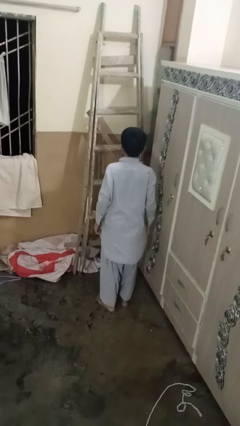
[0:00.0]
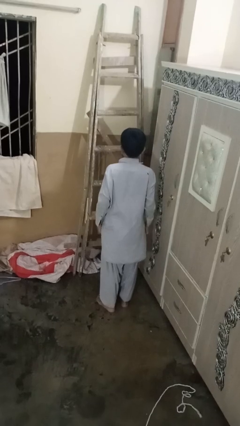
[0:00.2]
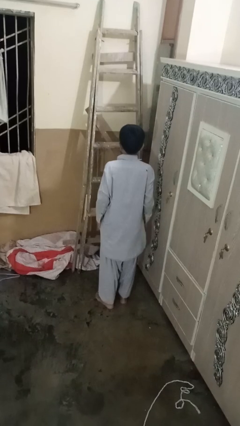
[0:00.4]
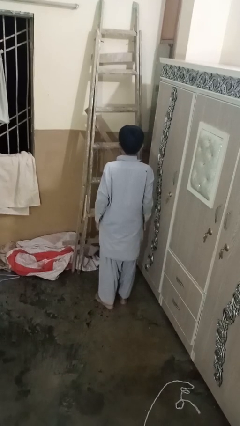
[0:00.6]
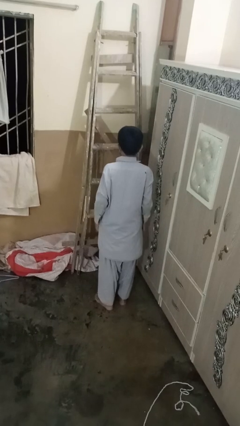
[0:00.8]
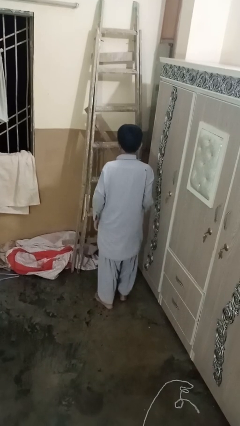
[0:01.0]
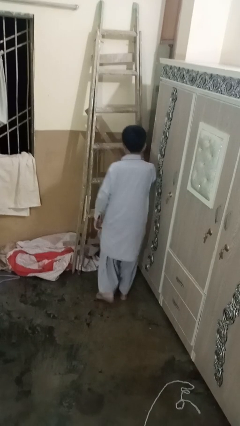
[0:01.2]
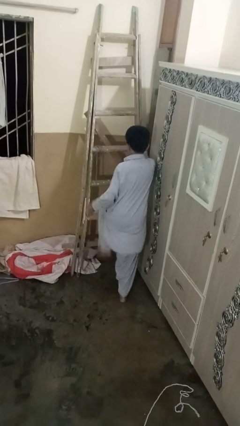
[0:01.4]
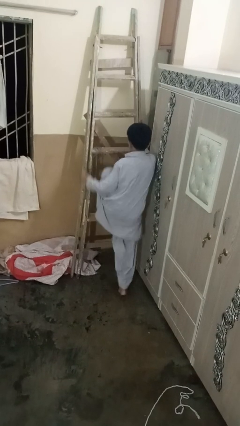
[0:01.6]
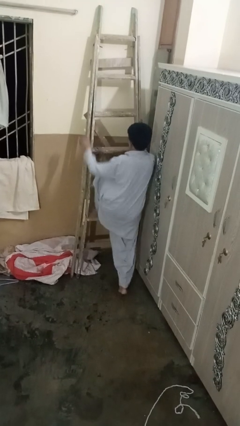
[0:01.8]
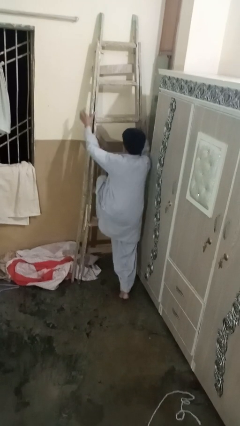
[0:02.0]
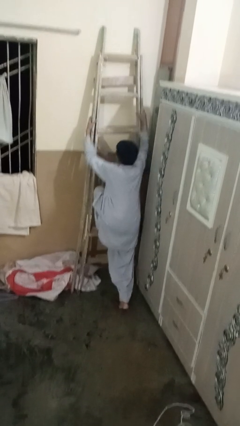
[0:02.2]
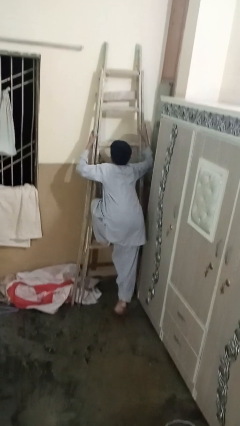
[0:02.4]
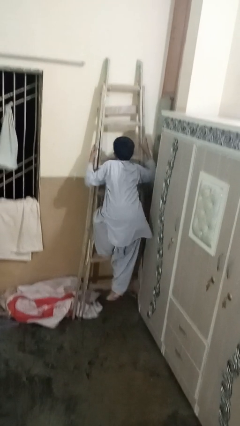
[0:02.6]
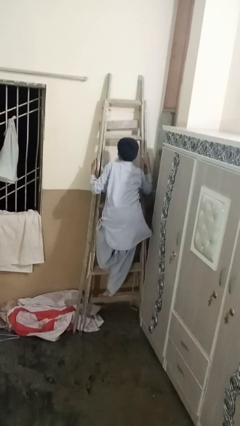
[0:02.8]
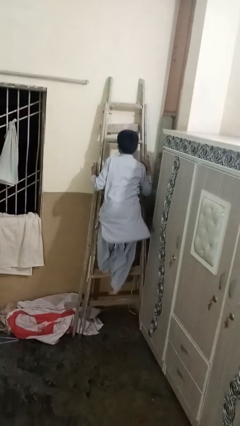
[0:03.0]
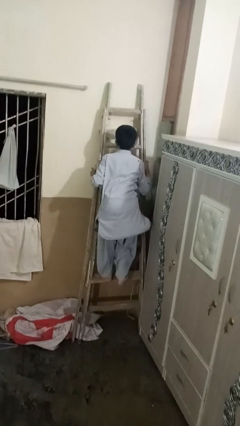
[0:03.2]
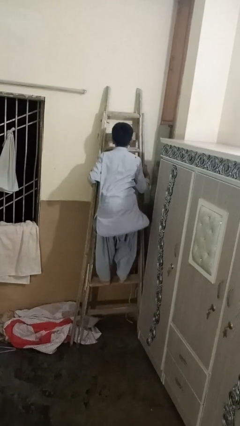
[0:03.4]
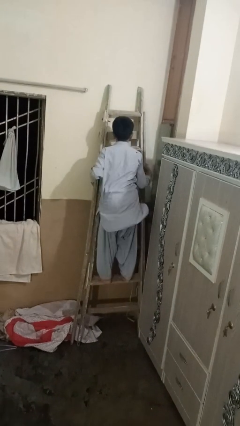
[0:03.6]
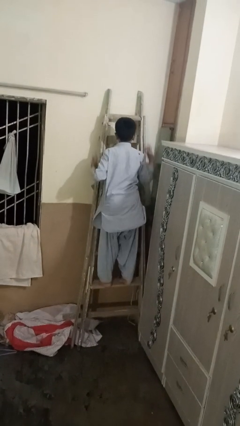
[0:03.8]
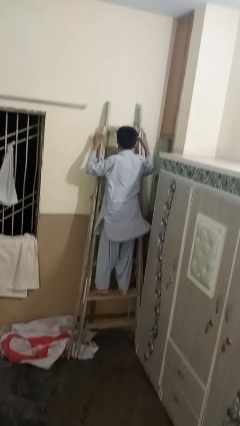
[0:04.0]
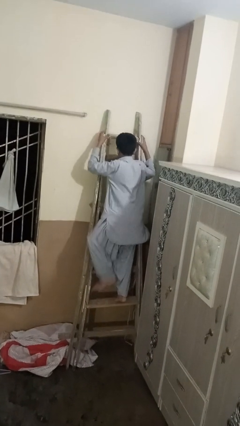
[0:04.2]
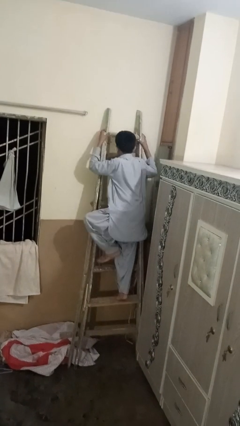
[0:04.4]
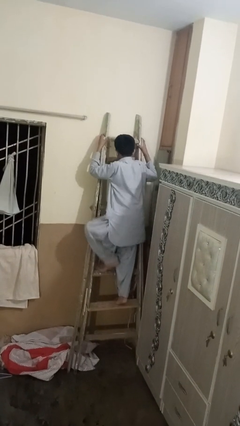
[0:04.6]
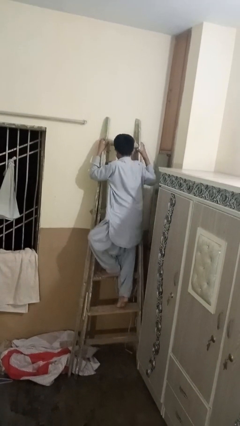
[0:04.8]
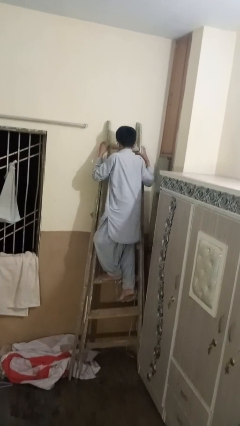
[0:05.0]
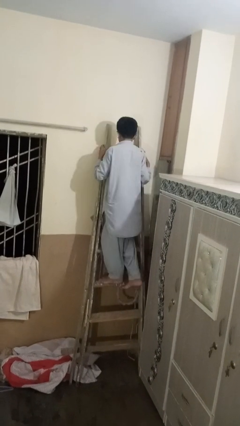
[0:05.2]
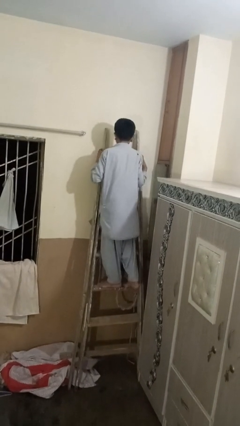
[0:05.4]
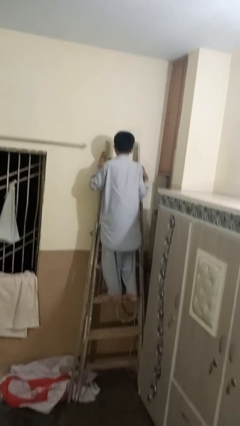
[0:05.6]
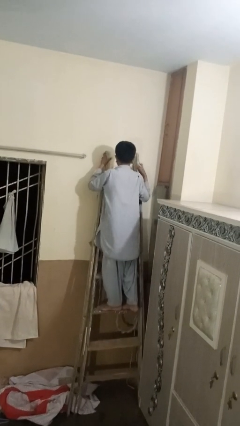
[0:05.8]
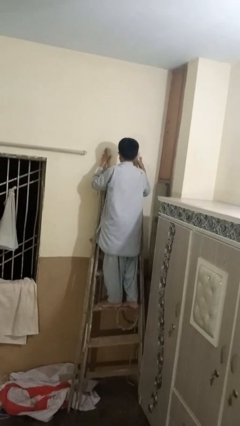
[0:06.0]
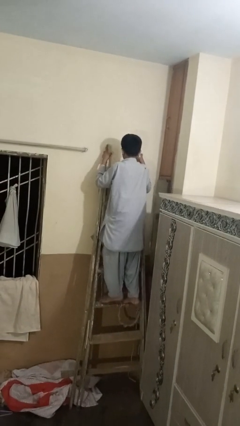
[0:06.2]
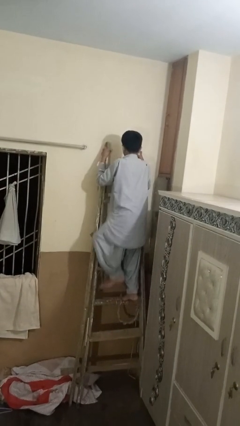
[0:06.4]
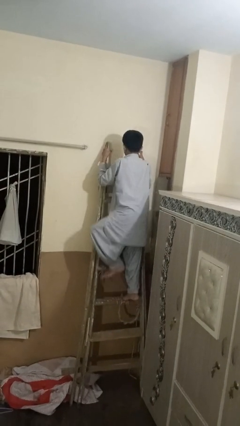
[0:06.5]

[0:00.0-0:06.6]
person climbs up ladder

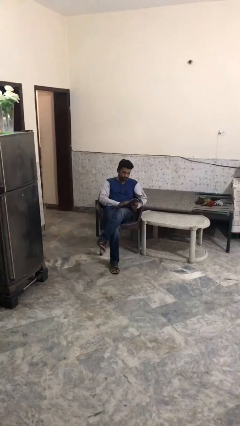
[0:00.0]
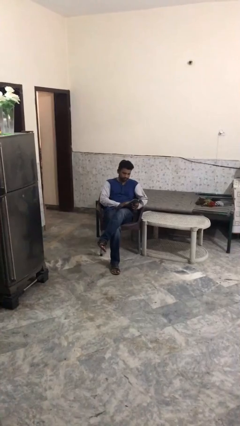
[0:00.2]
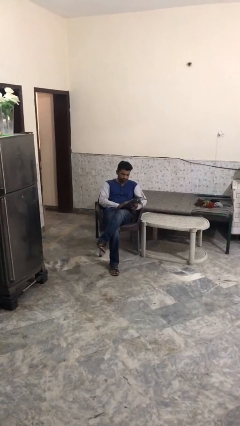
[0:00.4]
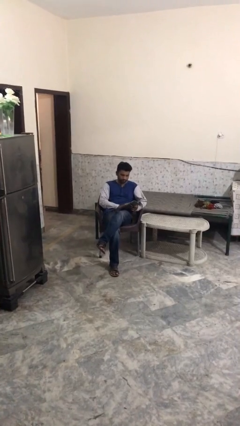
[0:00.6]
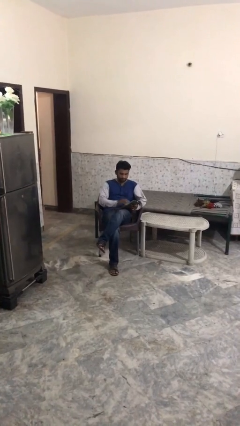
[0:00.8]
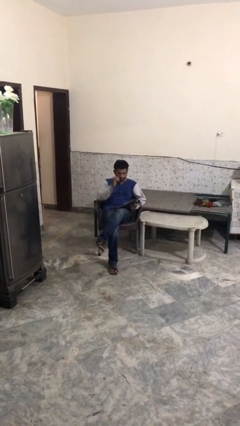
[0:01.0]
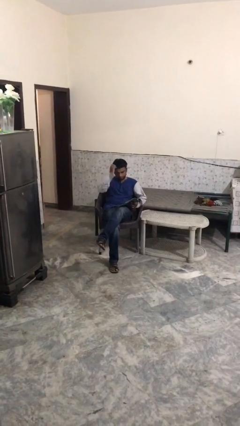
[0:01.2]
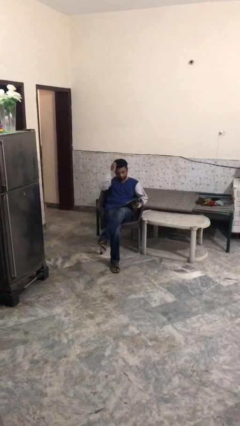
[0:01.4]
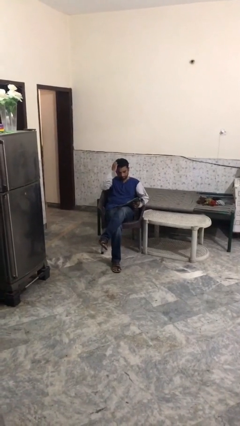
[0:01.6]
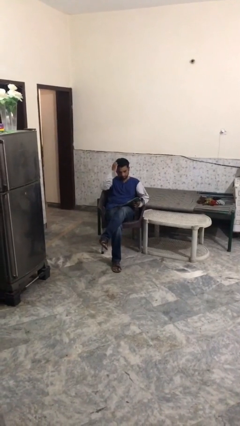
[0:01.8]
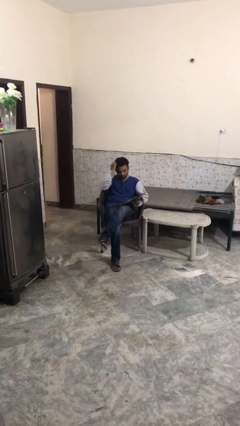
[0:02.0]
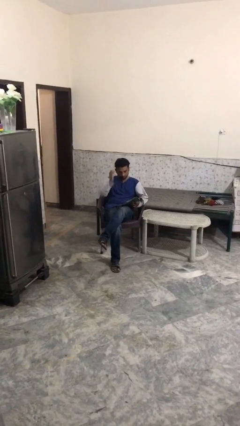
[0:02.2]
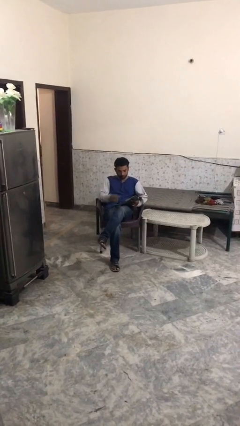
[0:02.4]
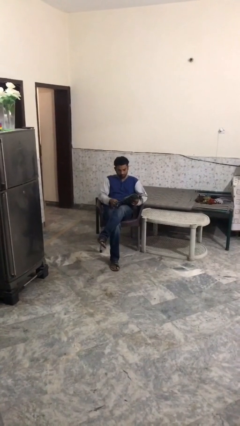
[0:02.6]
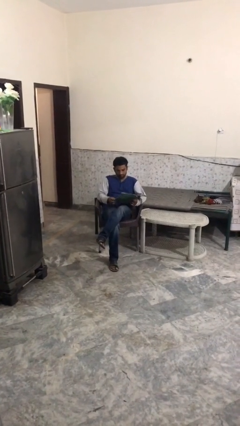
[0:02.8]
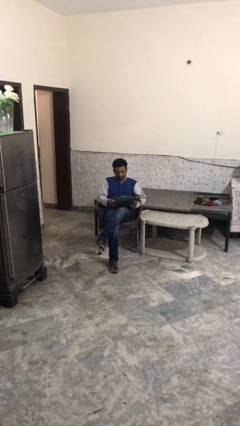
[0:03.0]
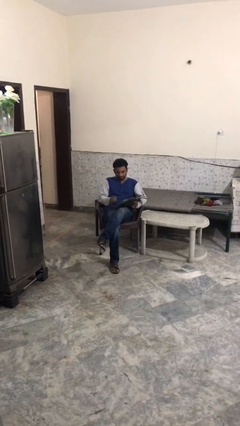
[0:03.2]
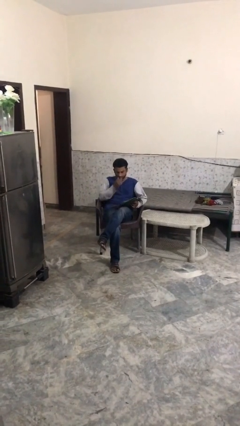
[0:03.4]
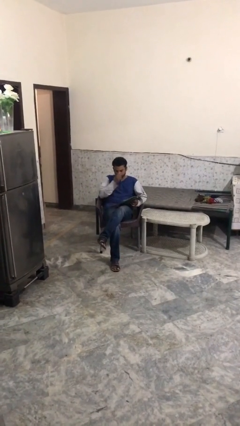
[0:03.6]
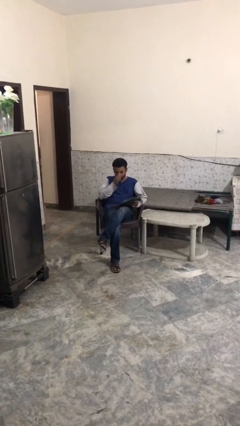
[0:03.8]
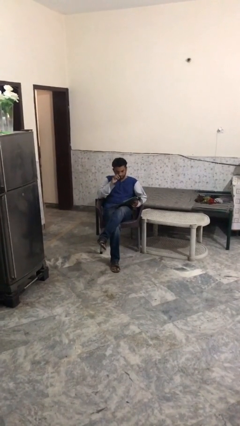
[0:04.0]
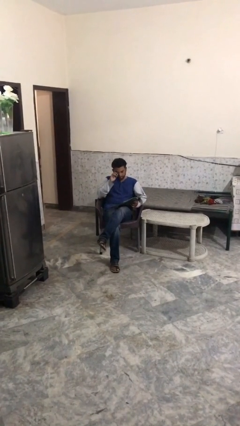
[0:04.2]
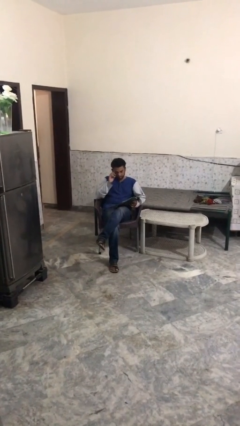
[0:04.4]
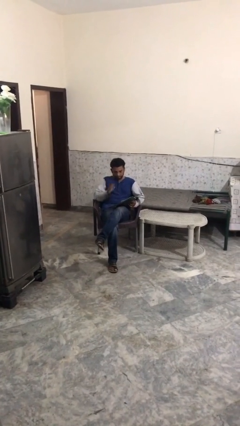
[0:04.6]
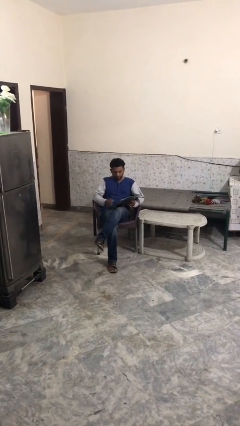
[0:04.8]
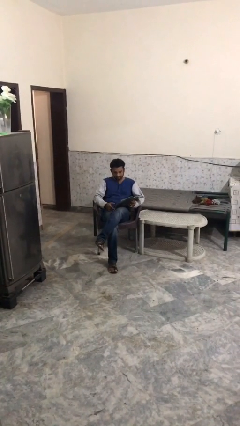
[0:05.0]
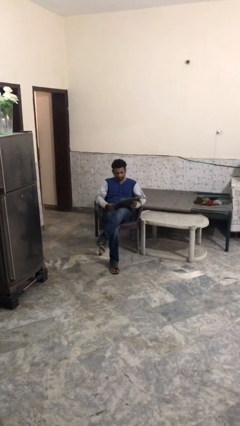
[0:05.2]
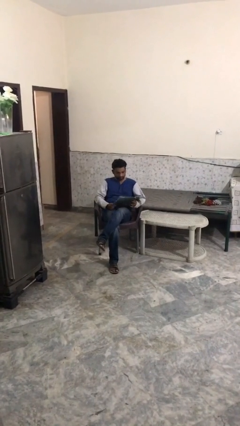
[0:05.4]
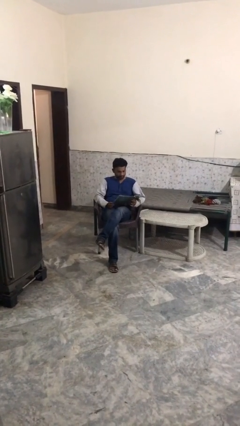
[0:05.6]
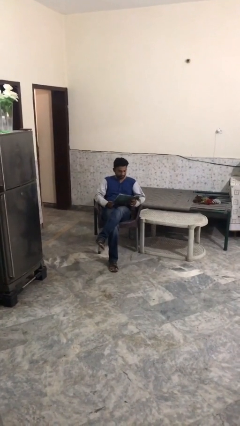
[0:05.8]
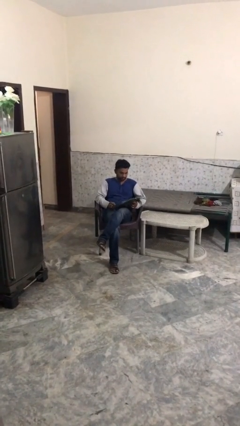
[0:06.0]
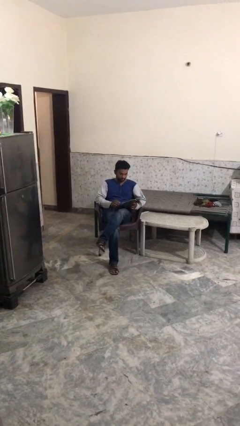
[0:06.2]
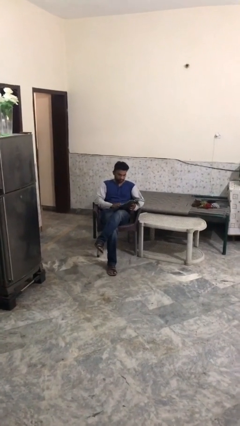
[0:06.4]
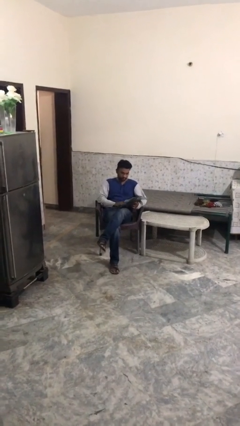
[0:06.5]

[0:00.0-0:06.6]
person reads document

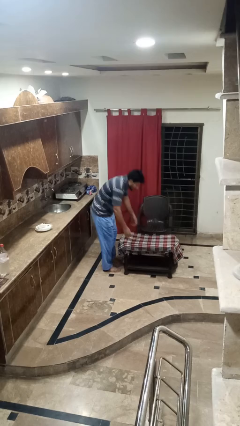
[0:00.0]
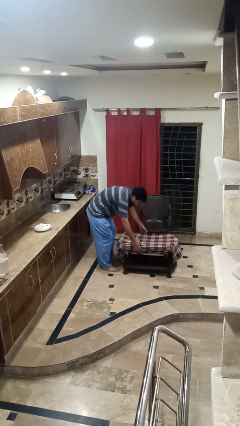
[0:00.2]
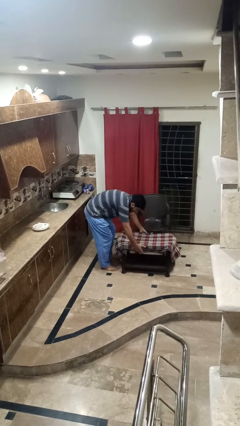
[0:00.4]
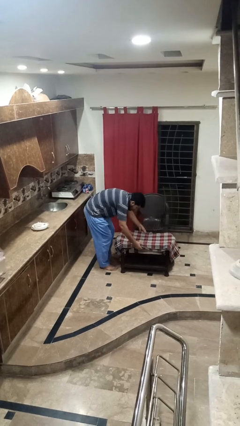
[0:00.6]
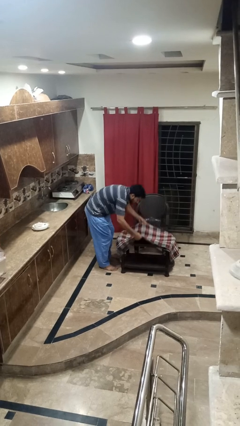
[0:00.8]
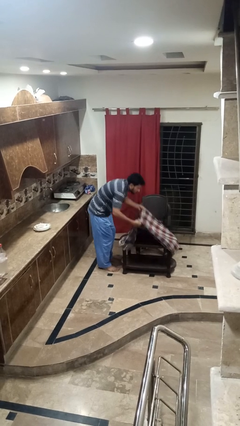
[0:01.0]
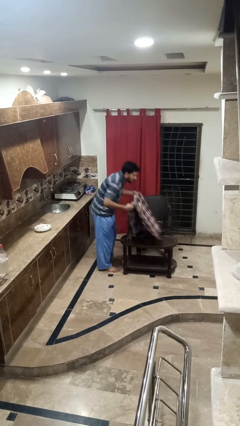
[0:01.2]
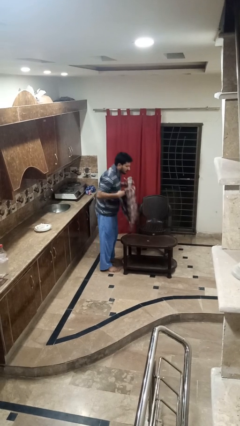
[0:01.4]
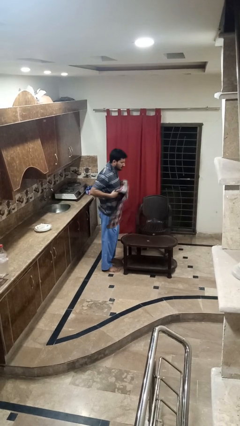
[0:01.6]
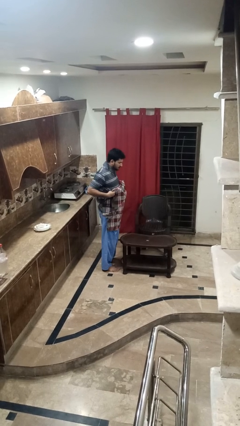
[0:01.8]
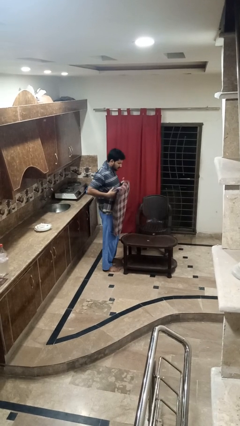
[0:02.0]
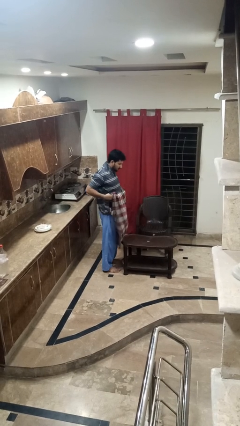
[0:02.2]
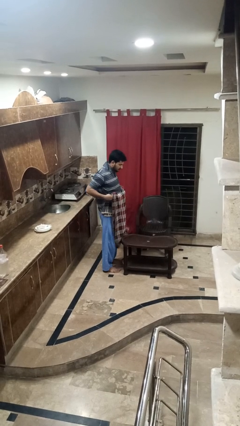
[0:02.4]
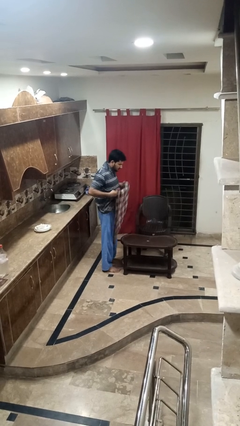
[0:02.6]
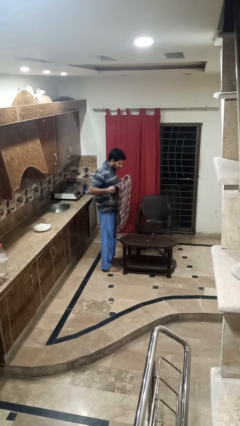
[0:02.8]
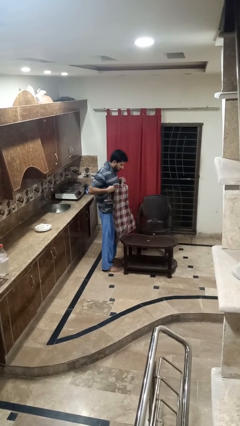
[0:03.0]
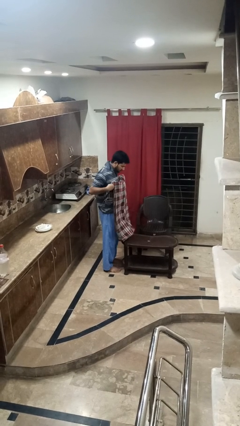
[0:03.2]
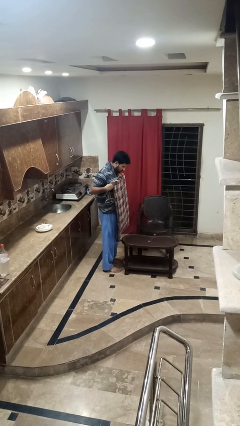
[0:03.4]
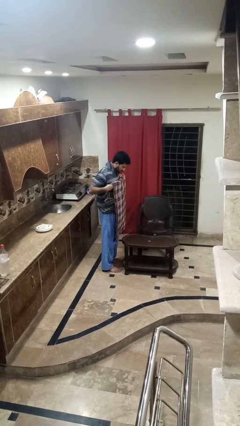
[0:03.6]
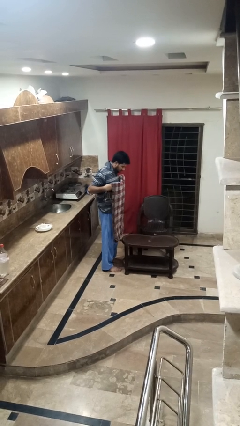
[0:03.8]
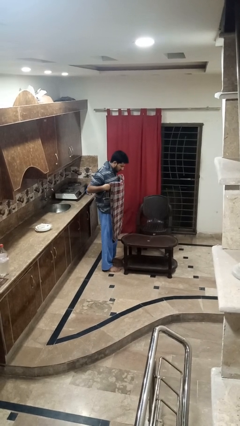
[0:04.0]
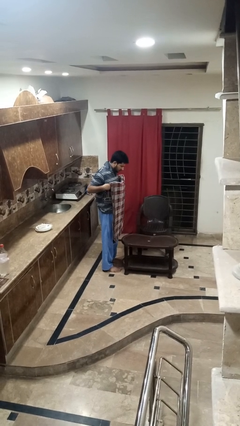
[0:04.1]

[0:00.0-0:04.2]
person folds tablecloth

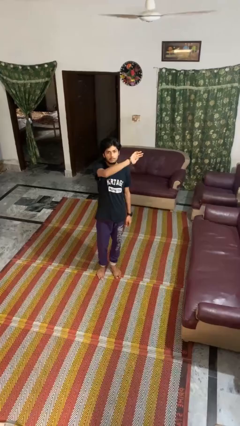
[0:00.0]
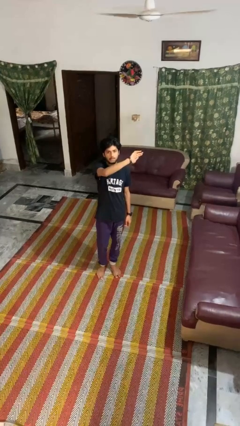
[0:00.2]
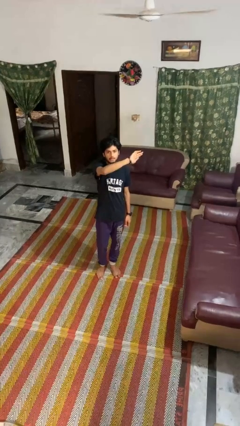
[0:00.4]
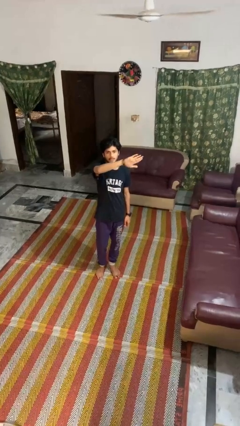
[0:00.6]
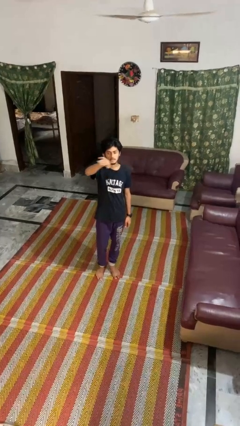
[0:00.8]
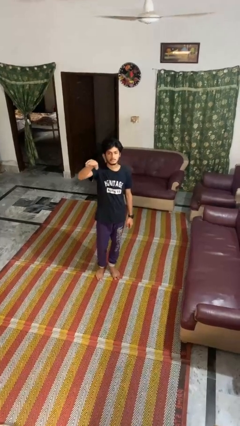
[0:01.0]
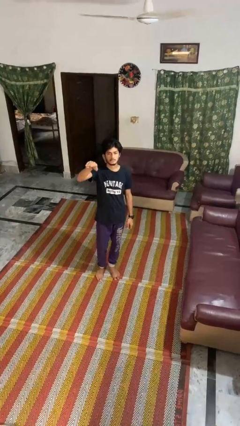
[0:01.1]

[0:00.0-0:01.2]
person gestures swipe right
